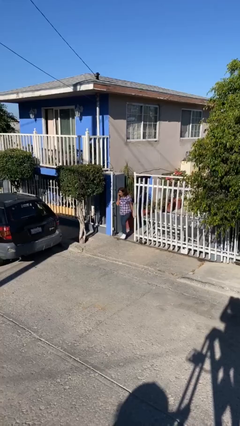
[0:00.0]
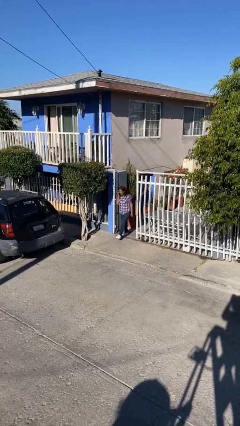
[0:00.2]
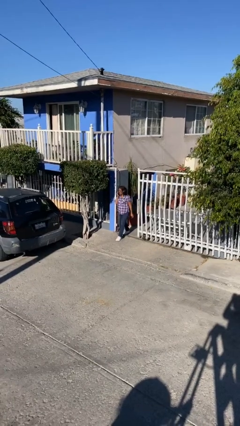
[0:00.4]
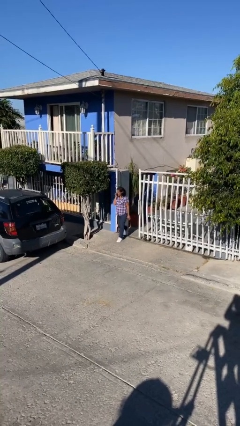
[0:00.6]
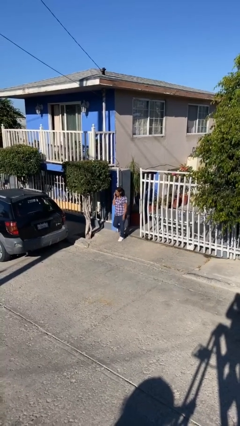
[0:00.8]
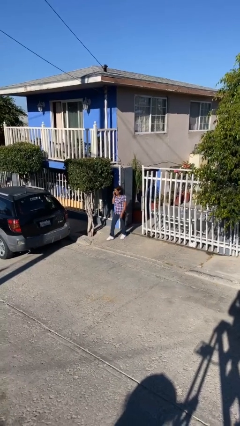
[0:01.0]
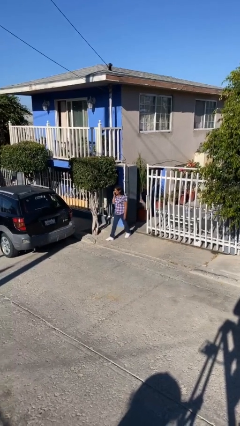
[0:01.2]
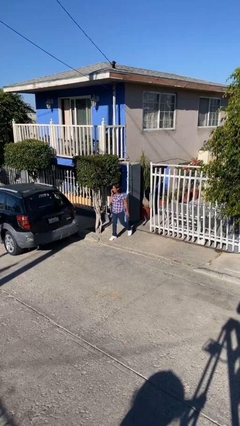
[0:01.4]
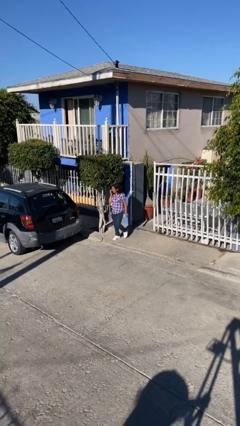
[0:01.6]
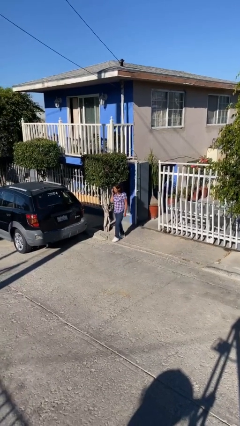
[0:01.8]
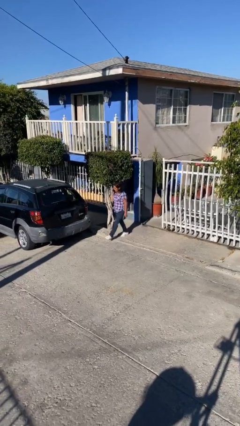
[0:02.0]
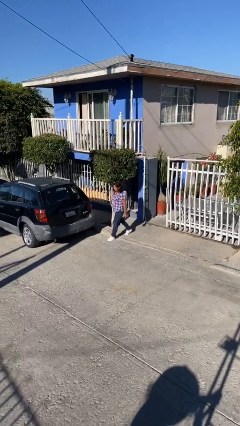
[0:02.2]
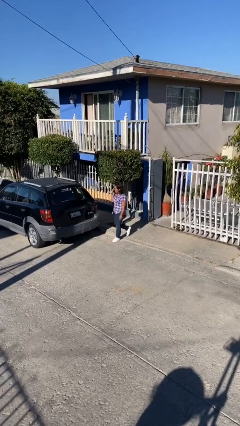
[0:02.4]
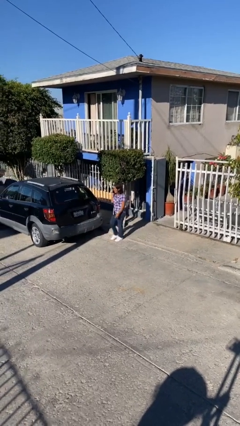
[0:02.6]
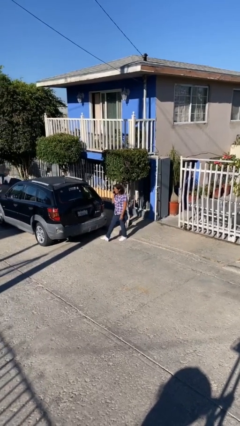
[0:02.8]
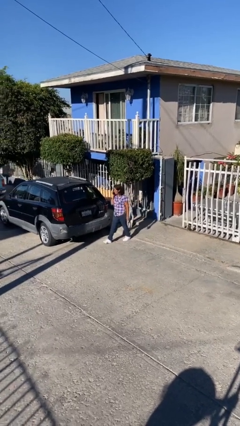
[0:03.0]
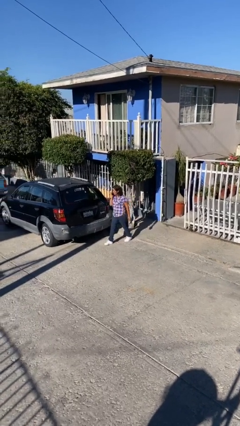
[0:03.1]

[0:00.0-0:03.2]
person enters scene through structure

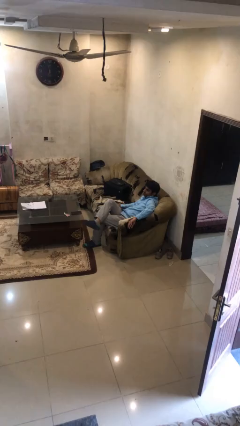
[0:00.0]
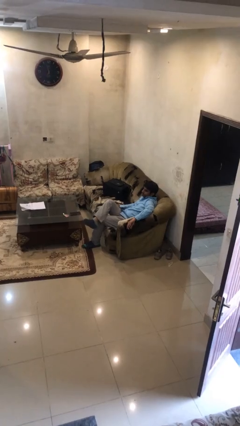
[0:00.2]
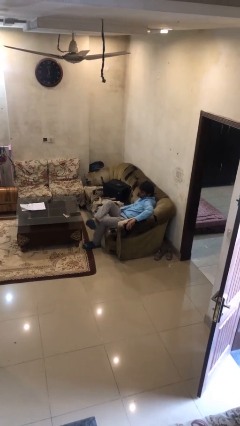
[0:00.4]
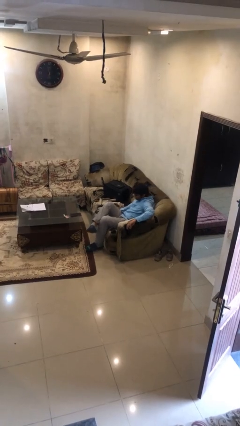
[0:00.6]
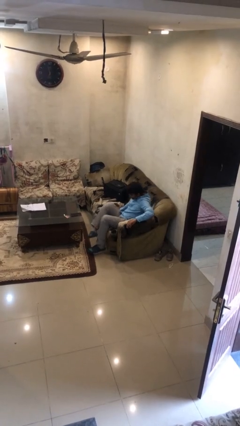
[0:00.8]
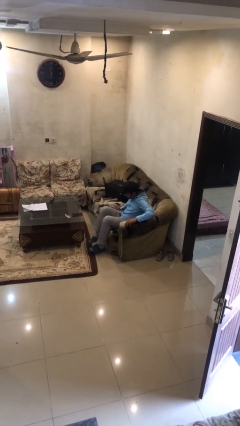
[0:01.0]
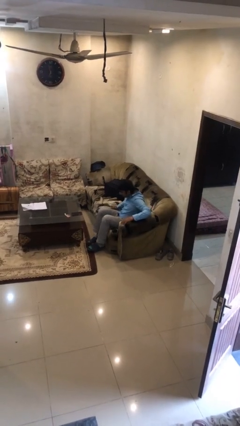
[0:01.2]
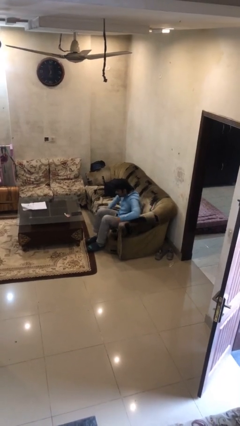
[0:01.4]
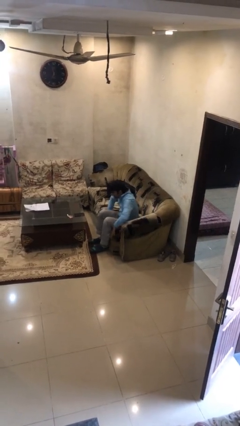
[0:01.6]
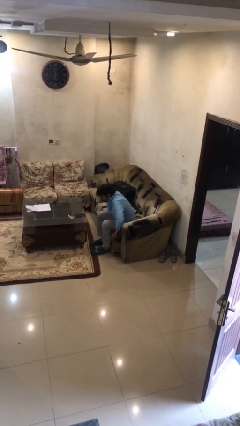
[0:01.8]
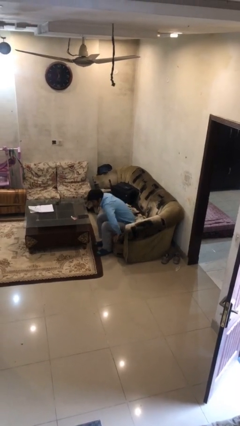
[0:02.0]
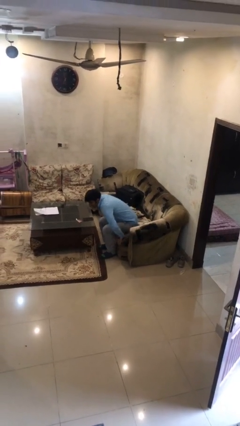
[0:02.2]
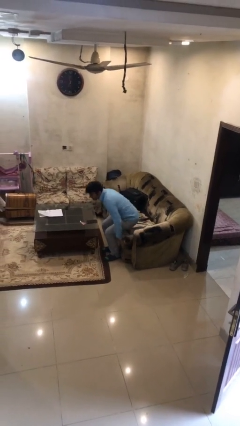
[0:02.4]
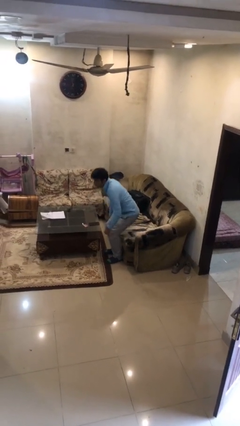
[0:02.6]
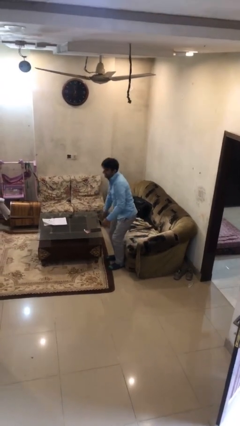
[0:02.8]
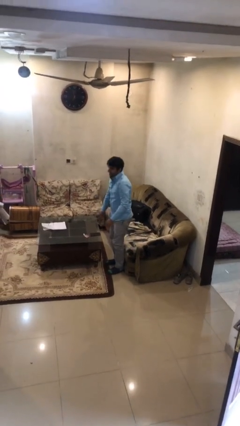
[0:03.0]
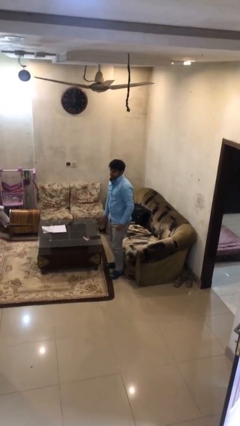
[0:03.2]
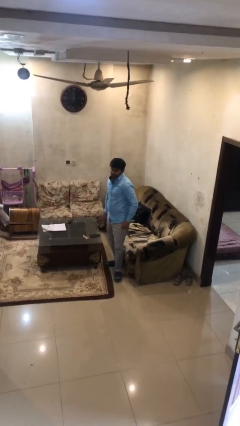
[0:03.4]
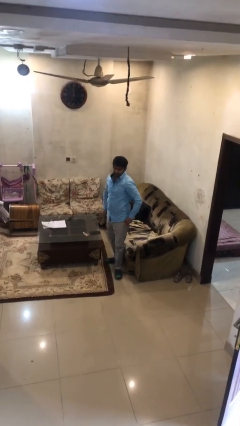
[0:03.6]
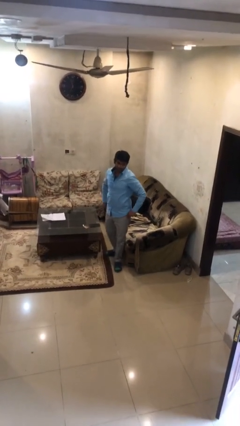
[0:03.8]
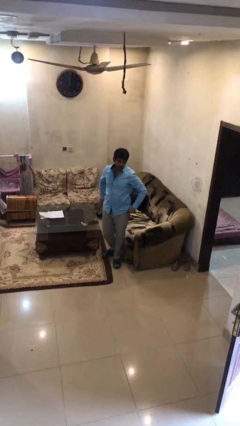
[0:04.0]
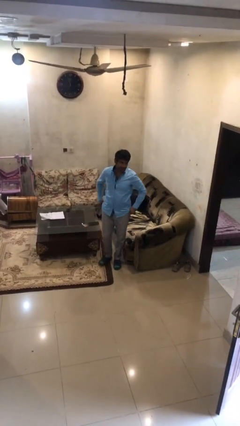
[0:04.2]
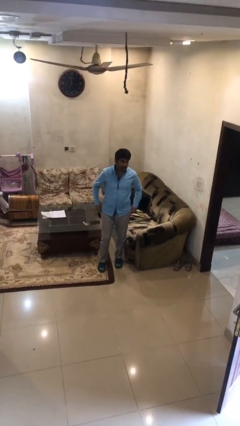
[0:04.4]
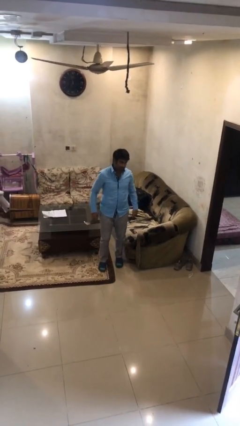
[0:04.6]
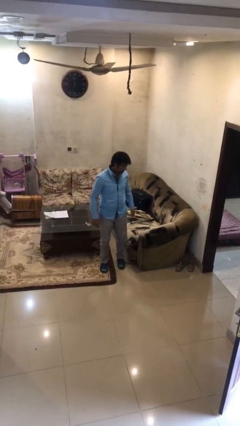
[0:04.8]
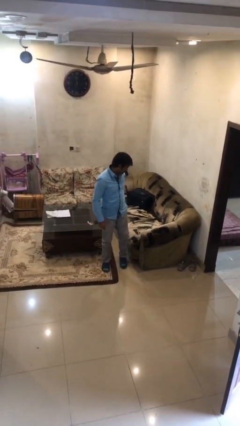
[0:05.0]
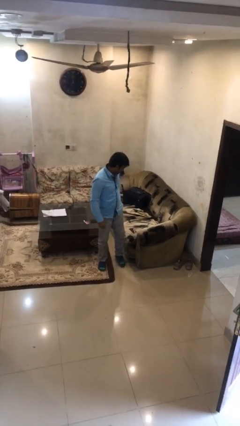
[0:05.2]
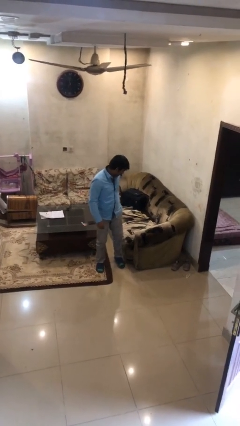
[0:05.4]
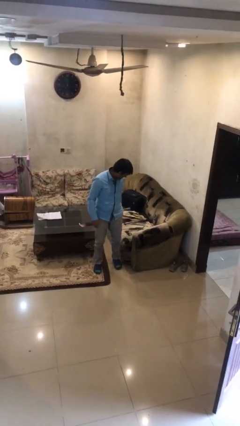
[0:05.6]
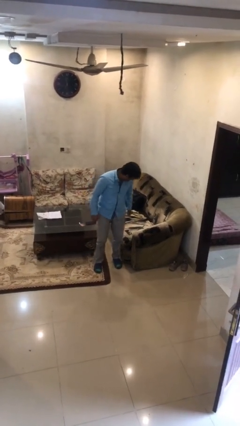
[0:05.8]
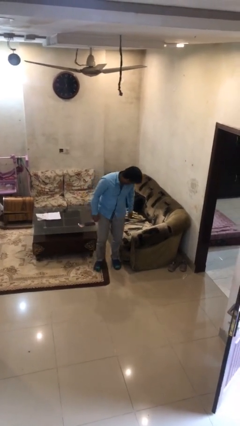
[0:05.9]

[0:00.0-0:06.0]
person stands up

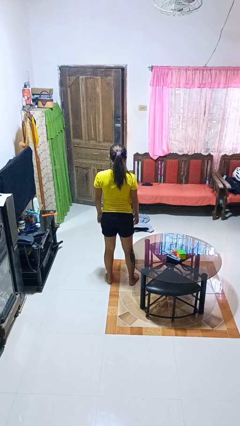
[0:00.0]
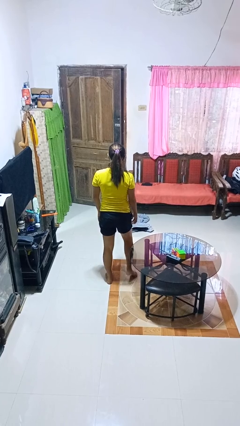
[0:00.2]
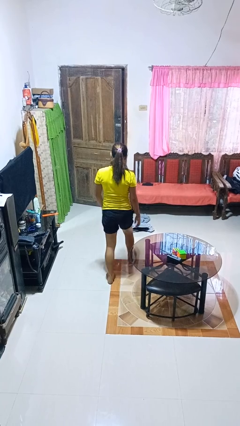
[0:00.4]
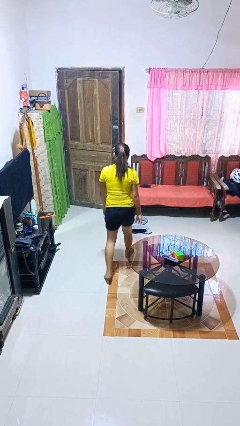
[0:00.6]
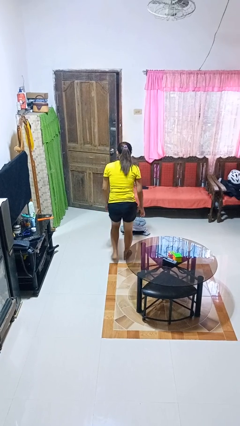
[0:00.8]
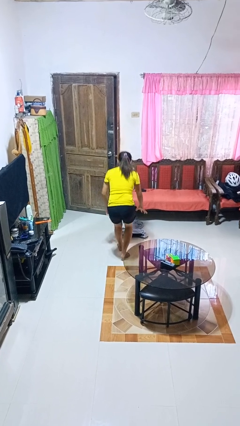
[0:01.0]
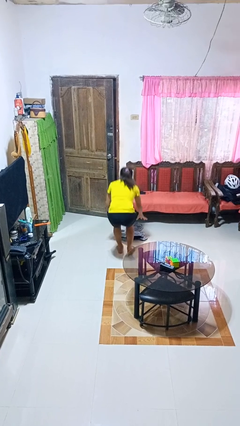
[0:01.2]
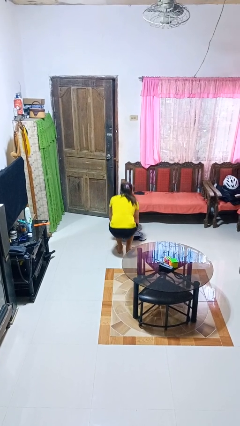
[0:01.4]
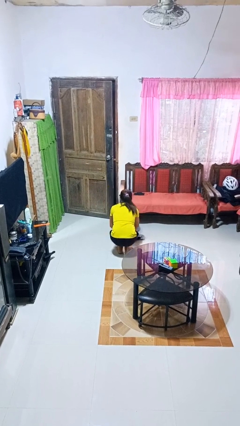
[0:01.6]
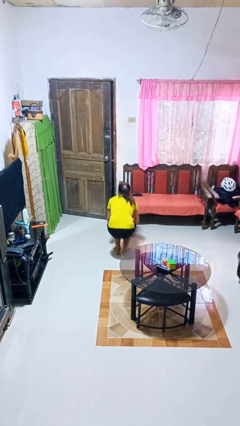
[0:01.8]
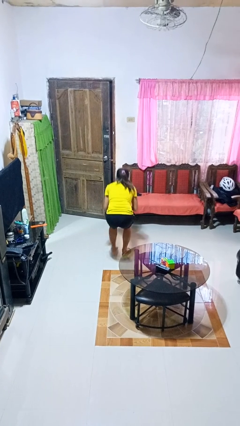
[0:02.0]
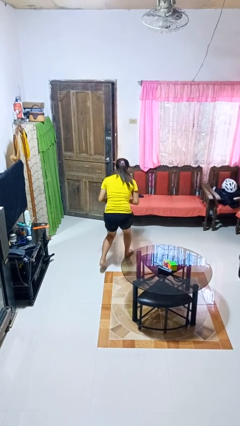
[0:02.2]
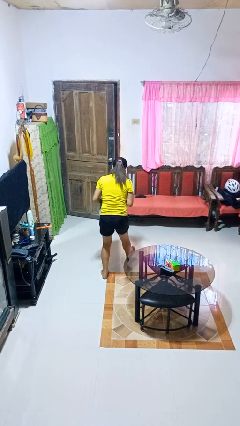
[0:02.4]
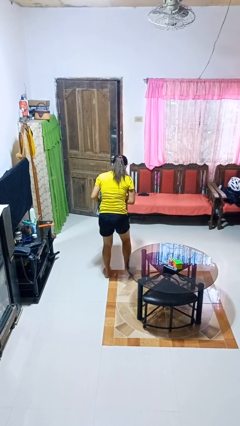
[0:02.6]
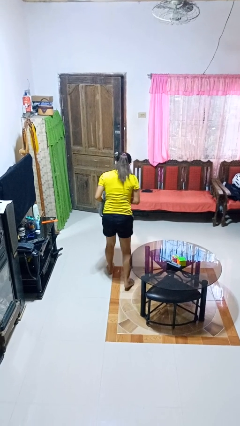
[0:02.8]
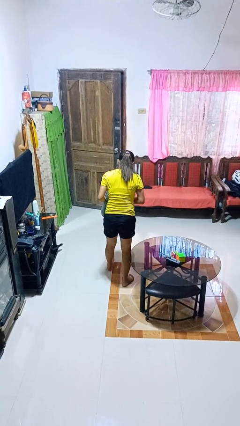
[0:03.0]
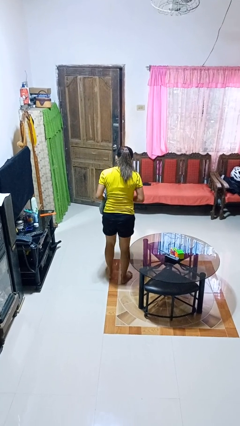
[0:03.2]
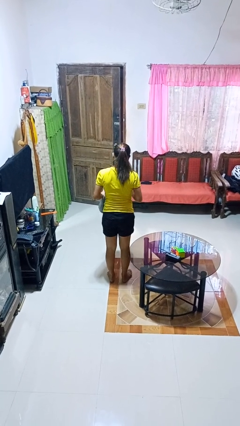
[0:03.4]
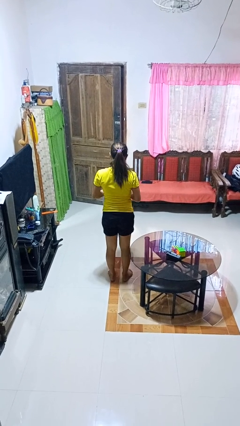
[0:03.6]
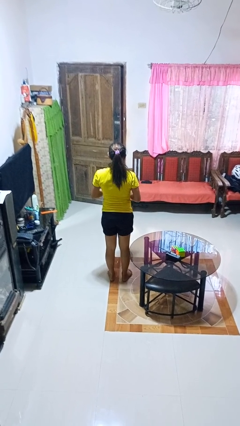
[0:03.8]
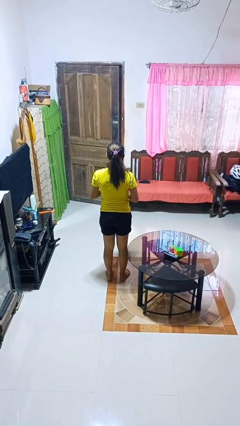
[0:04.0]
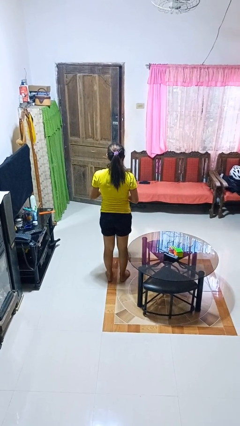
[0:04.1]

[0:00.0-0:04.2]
person picks up object from floor

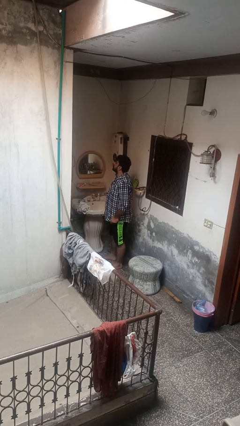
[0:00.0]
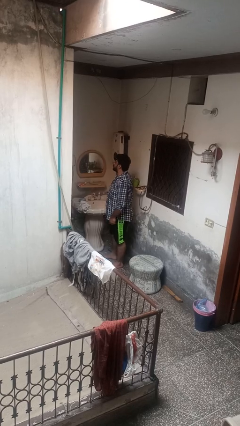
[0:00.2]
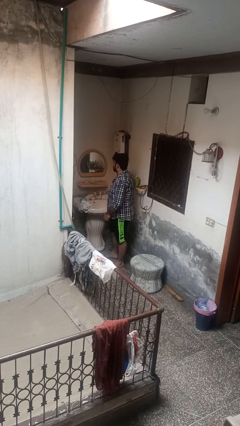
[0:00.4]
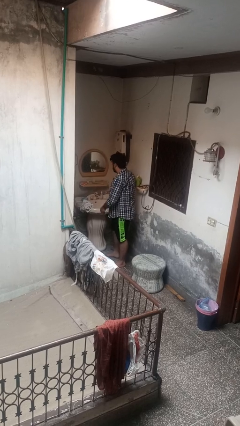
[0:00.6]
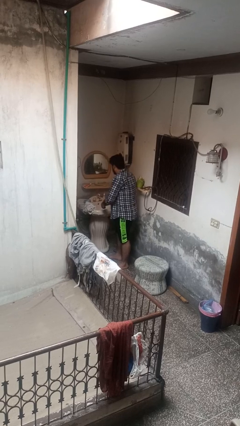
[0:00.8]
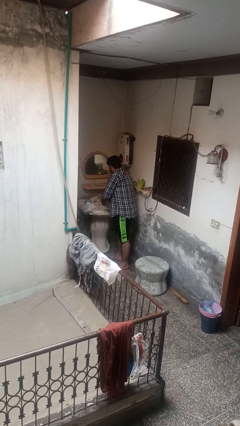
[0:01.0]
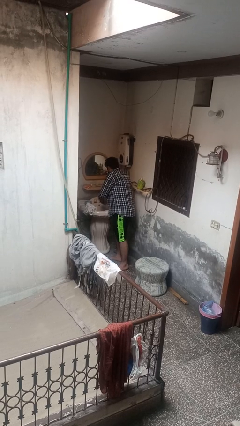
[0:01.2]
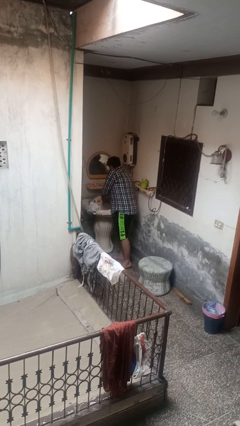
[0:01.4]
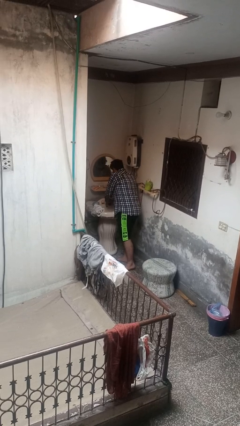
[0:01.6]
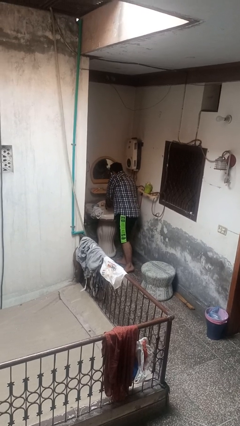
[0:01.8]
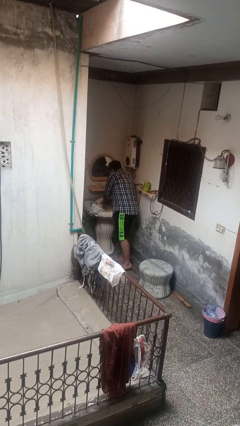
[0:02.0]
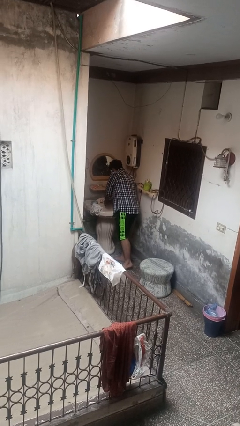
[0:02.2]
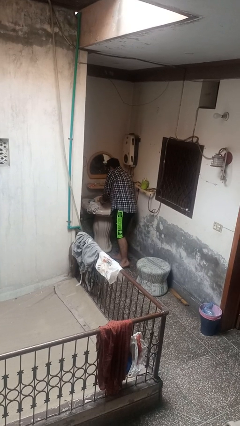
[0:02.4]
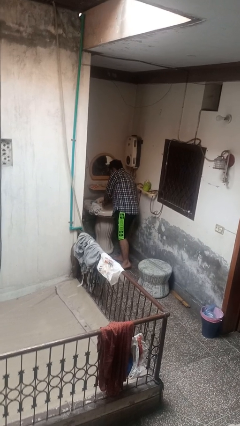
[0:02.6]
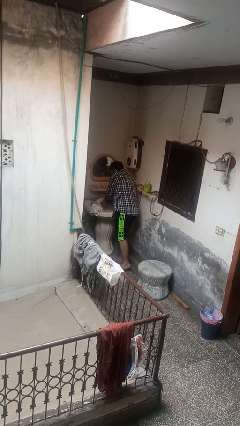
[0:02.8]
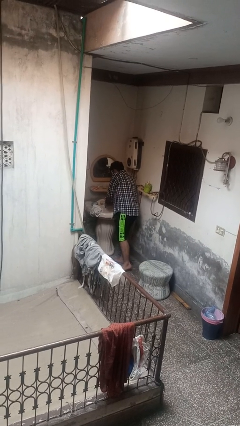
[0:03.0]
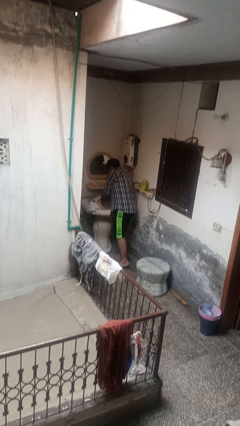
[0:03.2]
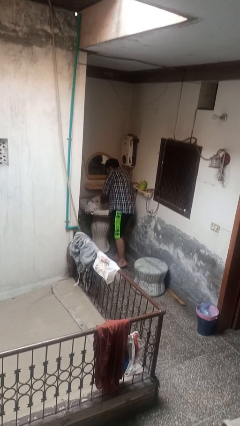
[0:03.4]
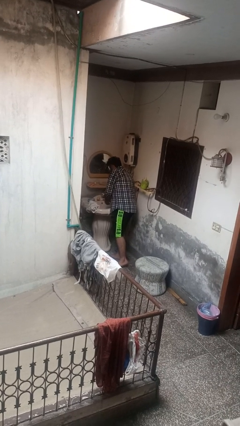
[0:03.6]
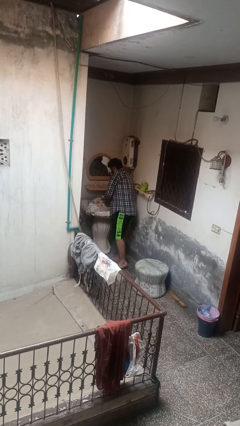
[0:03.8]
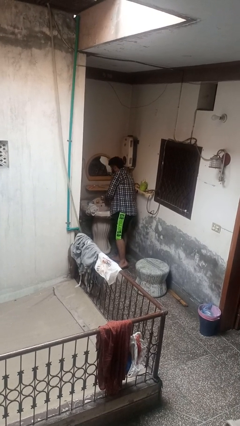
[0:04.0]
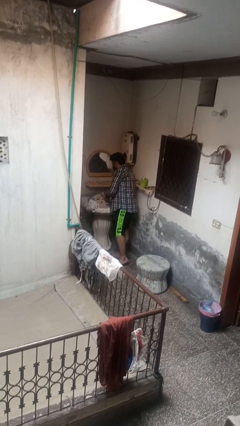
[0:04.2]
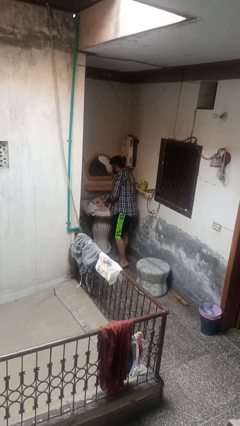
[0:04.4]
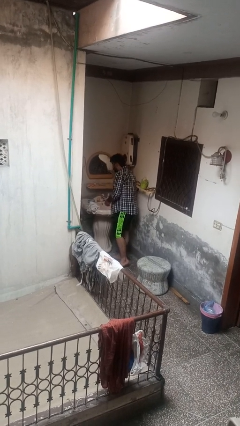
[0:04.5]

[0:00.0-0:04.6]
person washes hands
